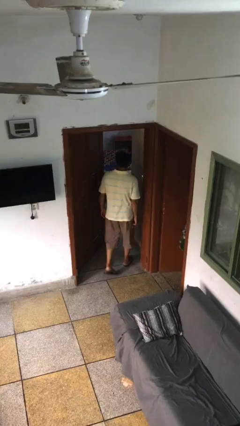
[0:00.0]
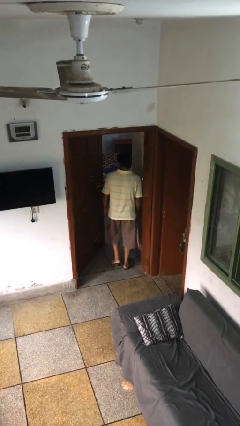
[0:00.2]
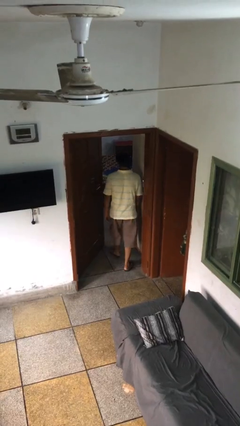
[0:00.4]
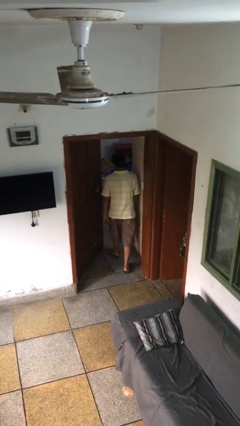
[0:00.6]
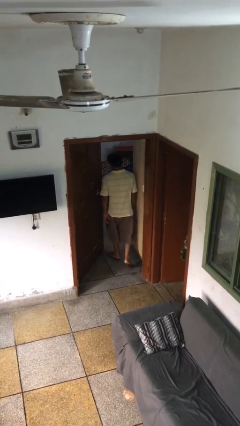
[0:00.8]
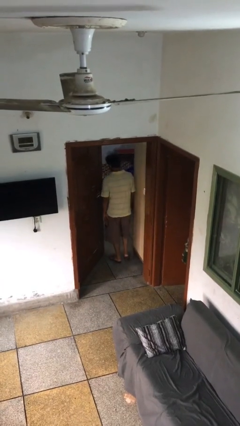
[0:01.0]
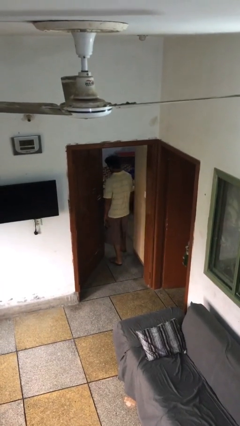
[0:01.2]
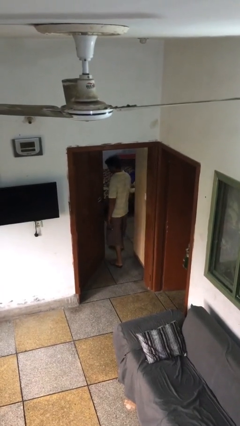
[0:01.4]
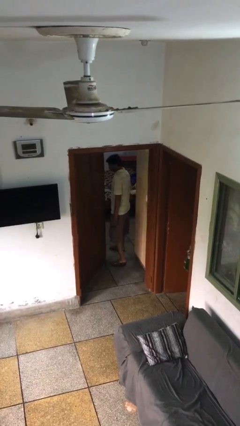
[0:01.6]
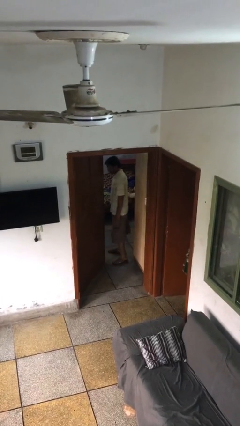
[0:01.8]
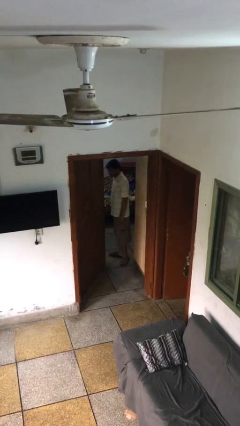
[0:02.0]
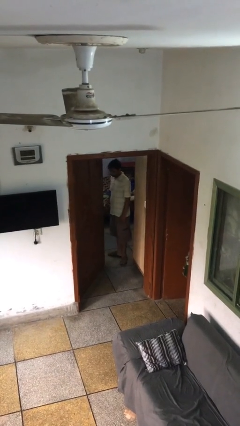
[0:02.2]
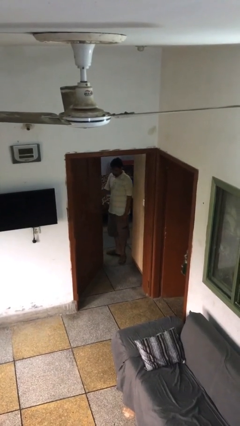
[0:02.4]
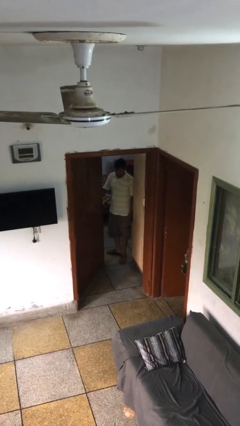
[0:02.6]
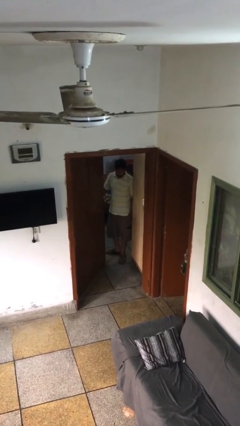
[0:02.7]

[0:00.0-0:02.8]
person exits scene through structure

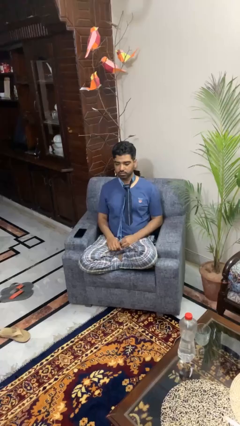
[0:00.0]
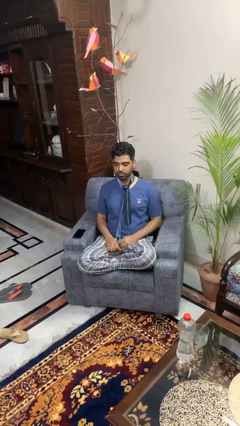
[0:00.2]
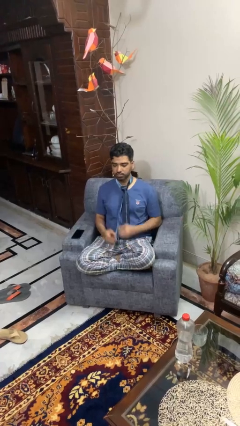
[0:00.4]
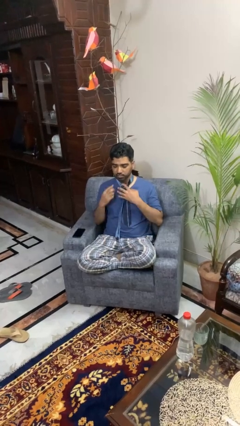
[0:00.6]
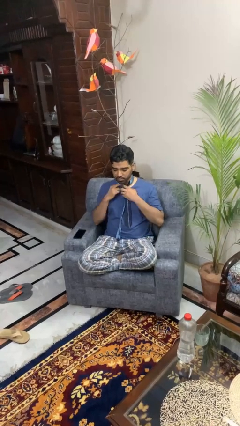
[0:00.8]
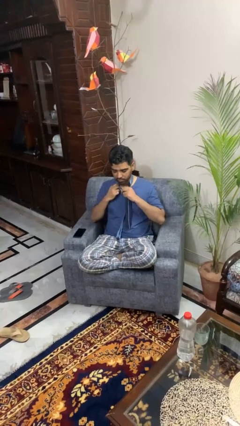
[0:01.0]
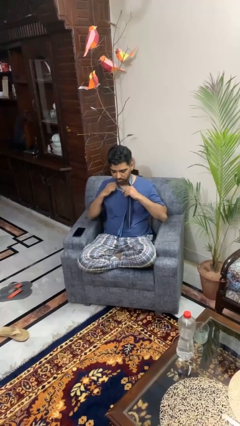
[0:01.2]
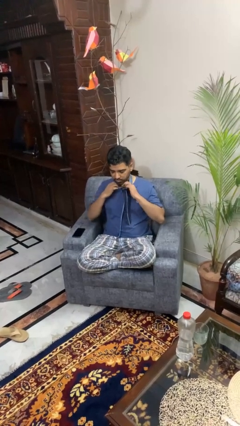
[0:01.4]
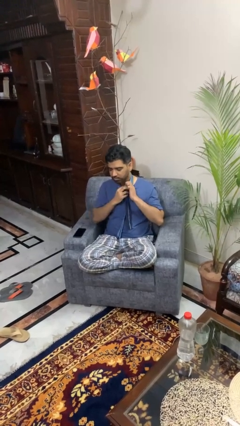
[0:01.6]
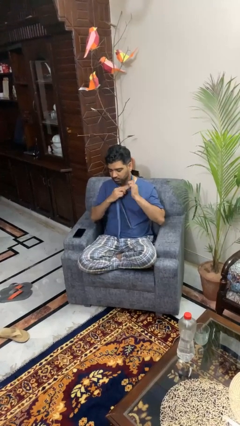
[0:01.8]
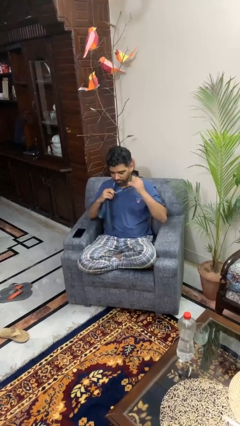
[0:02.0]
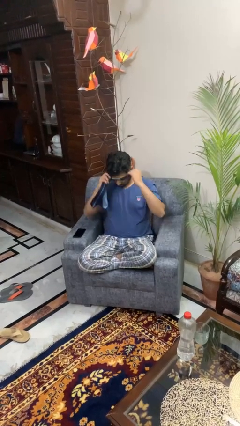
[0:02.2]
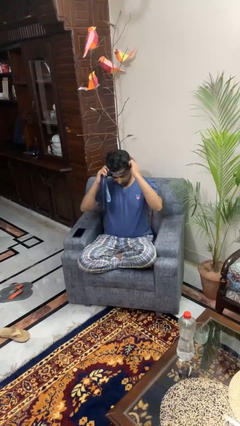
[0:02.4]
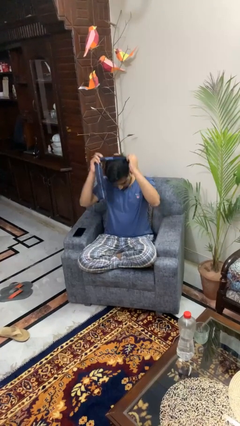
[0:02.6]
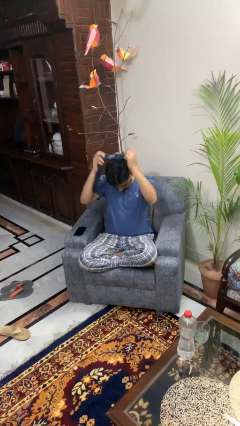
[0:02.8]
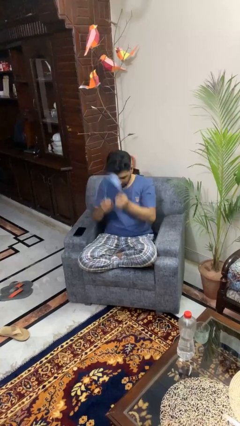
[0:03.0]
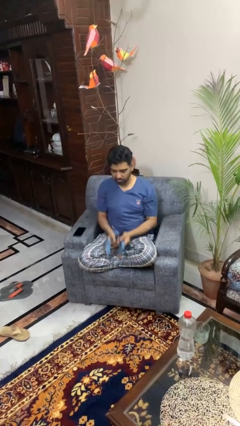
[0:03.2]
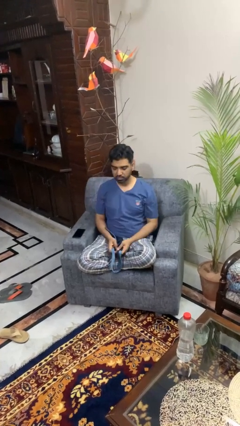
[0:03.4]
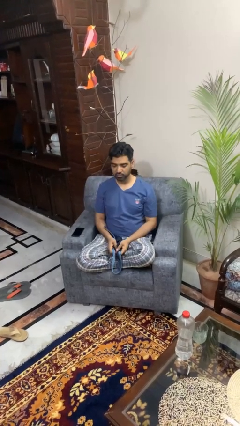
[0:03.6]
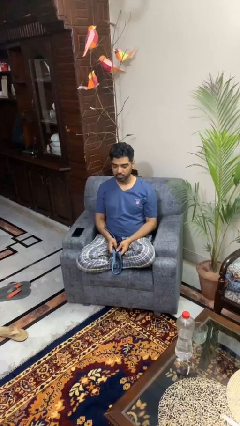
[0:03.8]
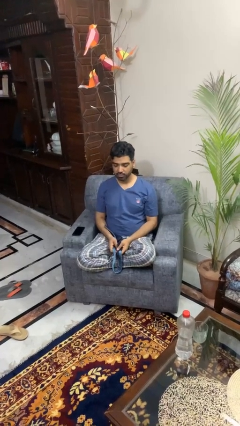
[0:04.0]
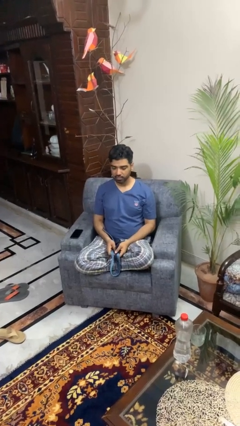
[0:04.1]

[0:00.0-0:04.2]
person takes off necktie

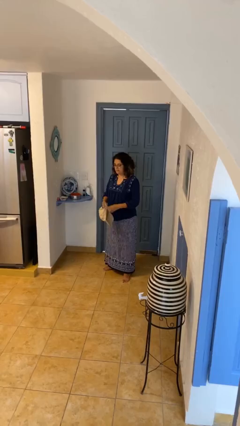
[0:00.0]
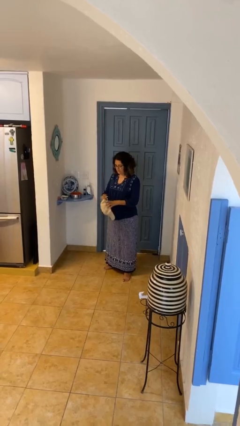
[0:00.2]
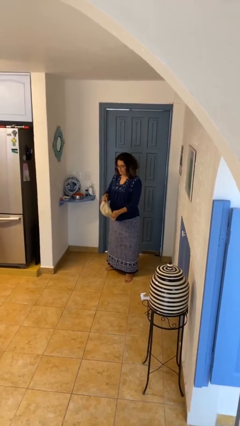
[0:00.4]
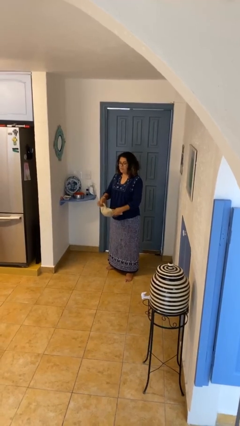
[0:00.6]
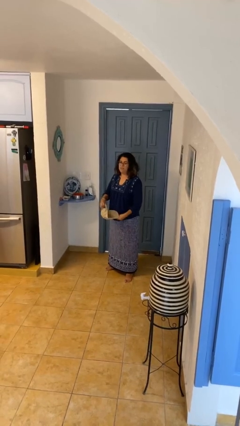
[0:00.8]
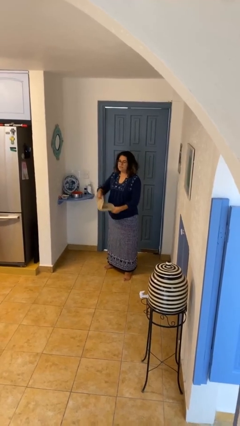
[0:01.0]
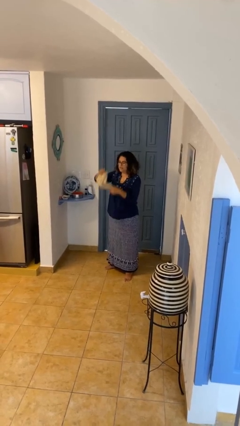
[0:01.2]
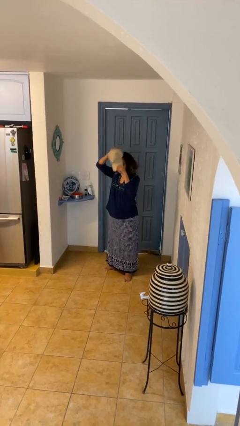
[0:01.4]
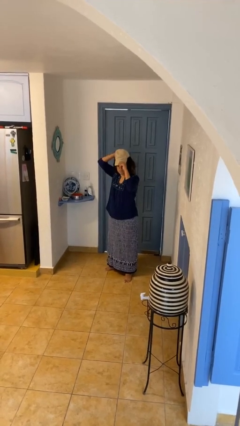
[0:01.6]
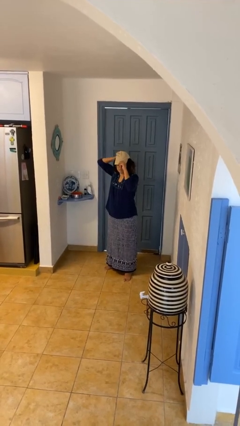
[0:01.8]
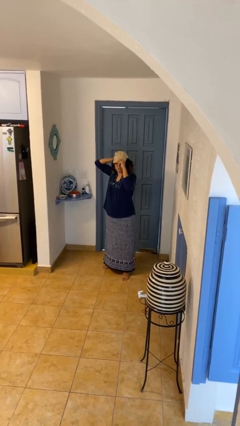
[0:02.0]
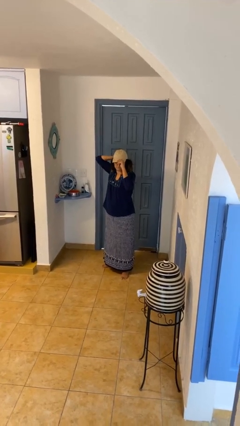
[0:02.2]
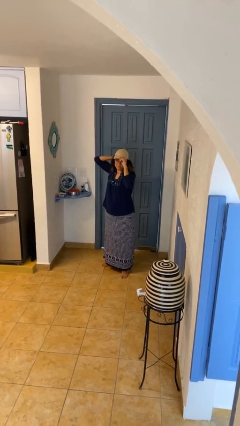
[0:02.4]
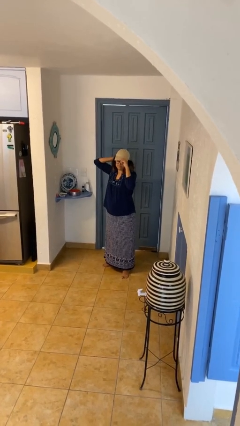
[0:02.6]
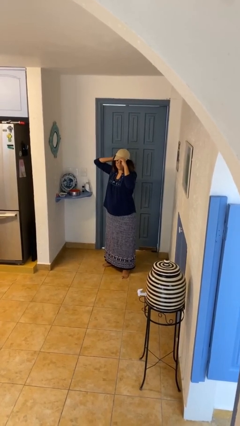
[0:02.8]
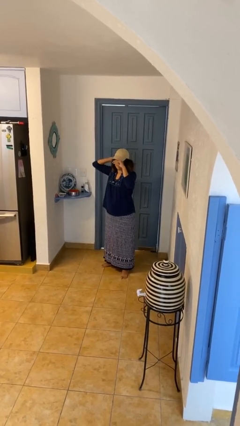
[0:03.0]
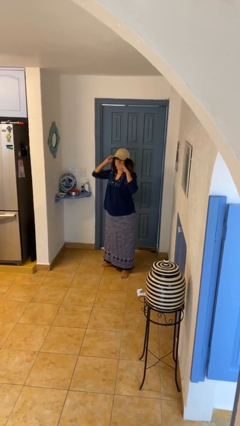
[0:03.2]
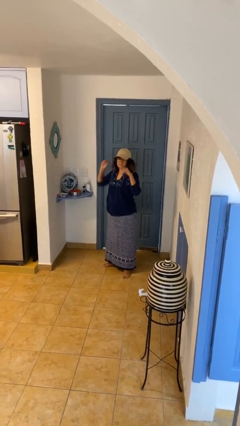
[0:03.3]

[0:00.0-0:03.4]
person puts on hat

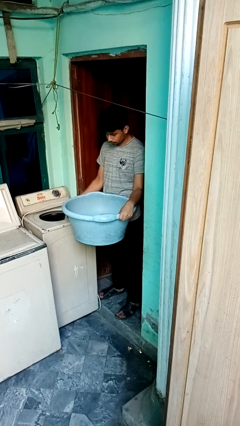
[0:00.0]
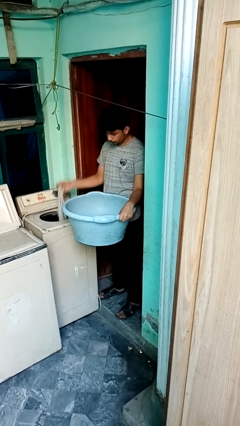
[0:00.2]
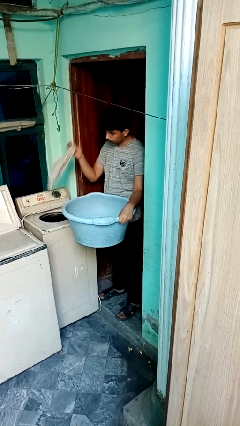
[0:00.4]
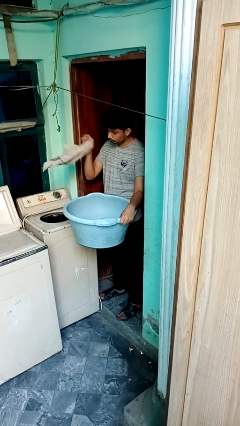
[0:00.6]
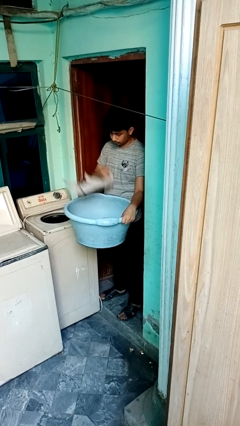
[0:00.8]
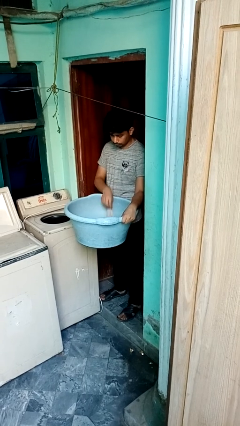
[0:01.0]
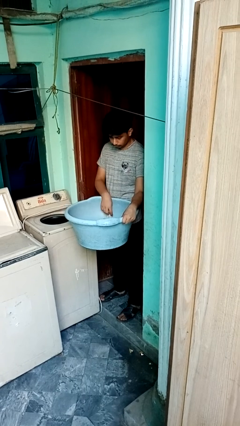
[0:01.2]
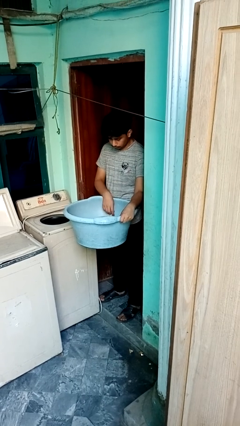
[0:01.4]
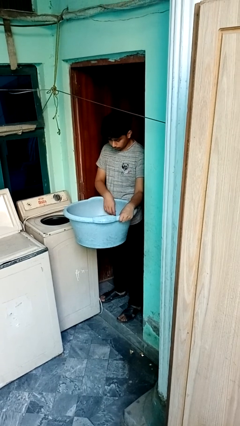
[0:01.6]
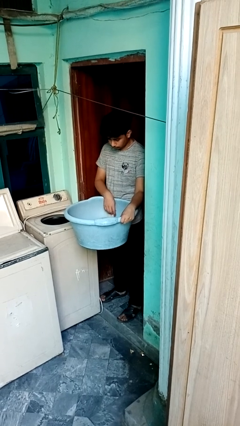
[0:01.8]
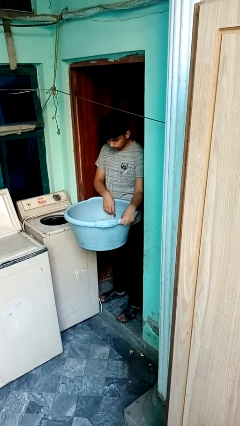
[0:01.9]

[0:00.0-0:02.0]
person unloads dryer

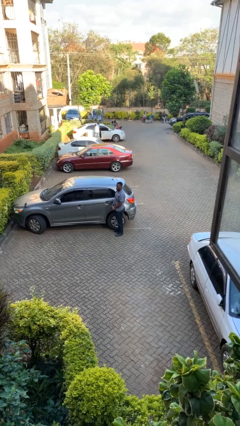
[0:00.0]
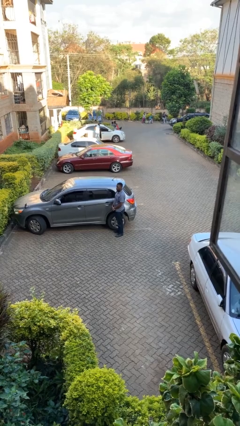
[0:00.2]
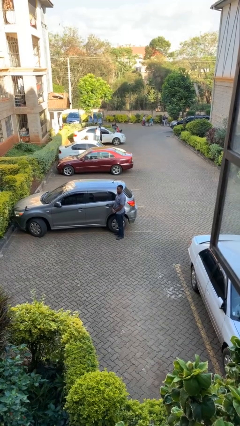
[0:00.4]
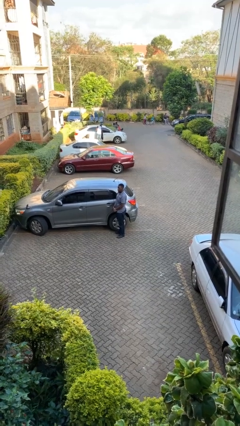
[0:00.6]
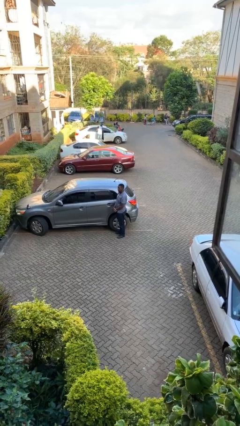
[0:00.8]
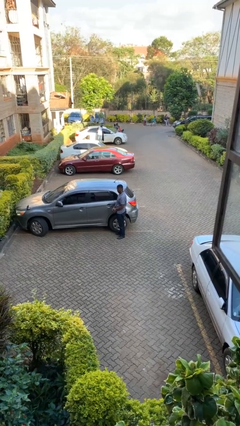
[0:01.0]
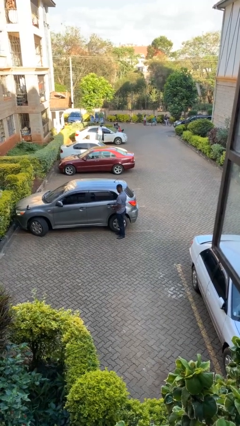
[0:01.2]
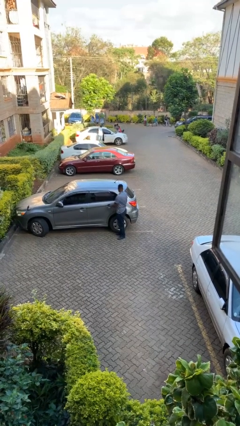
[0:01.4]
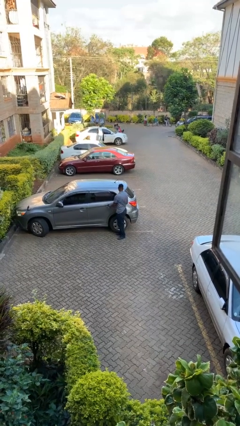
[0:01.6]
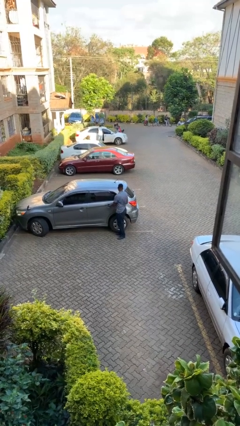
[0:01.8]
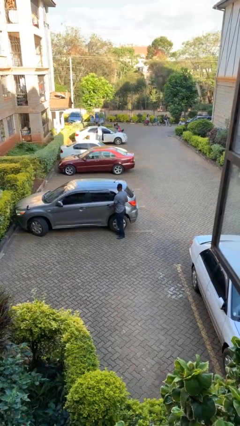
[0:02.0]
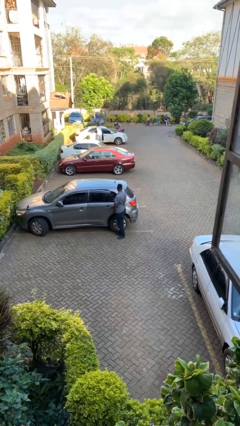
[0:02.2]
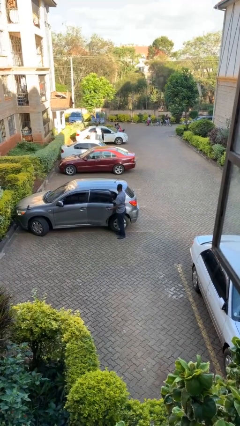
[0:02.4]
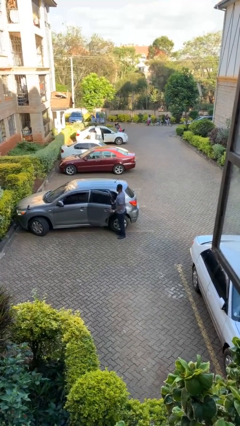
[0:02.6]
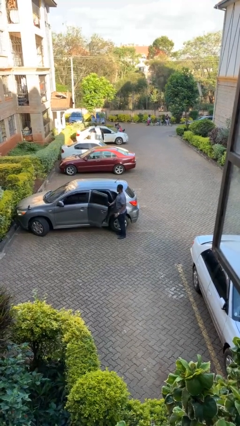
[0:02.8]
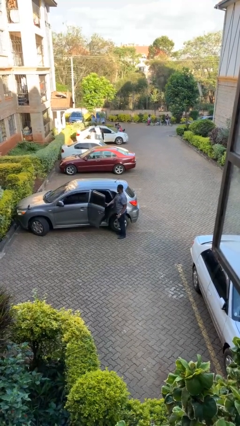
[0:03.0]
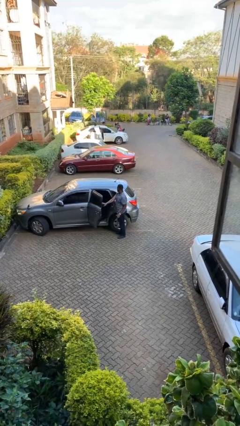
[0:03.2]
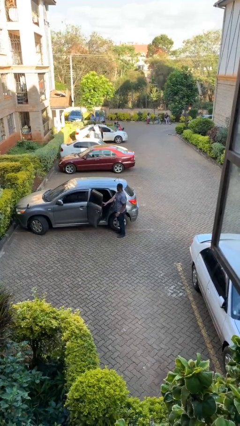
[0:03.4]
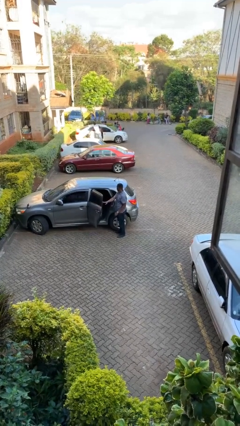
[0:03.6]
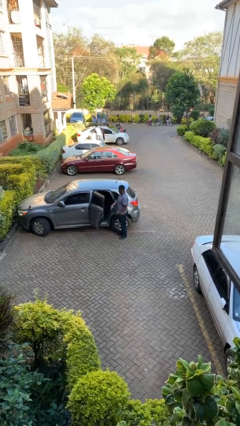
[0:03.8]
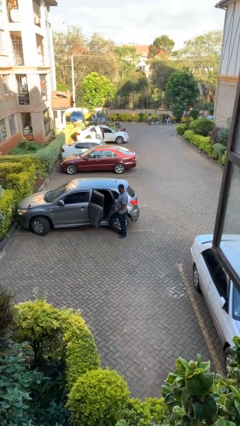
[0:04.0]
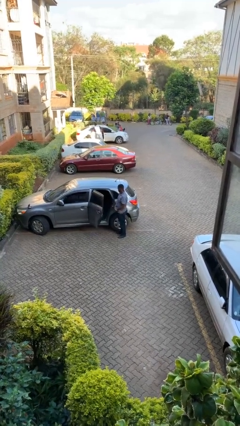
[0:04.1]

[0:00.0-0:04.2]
person opens car door

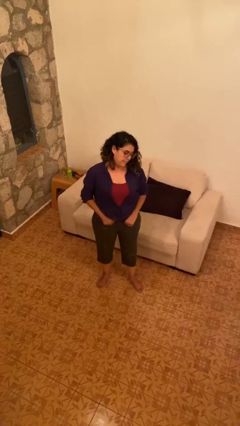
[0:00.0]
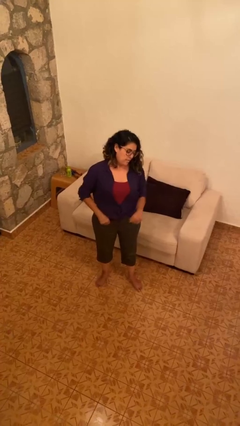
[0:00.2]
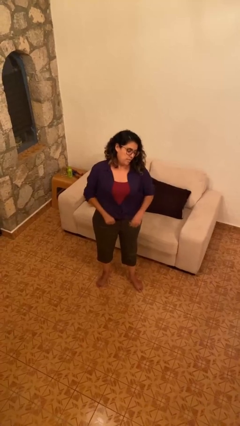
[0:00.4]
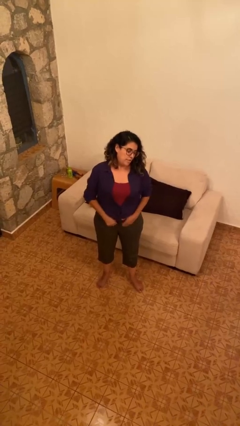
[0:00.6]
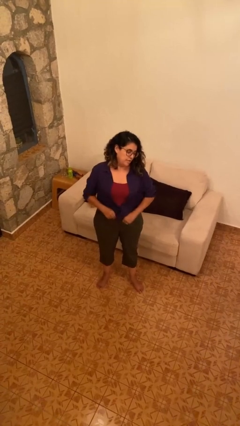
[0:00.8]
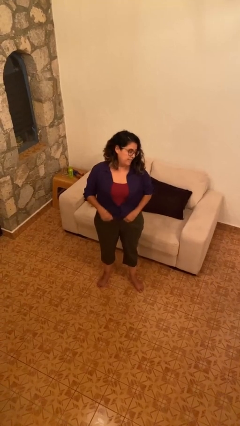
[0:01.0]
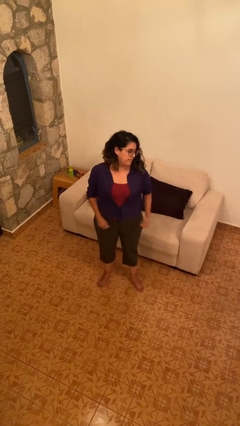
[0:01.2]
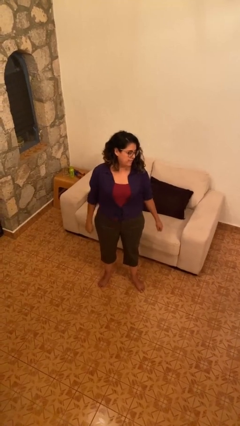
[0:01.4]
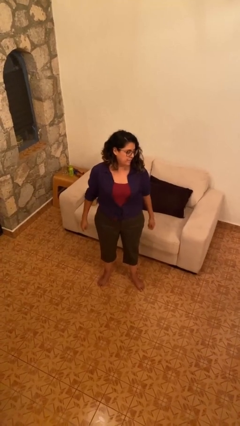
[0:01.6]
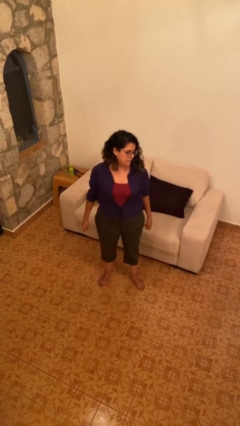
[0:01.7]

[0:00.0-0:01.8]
person hikes up pants
